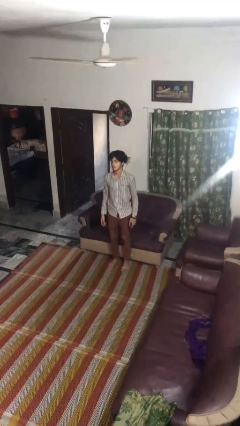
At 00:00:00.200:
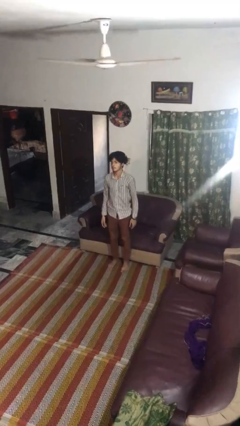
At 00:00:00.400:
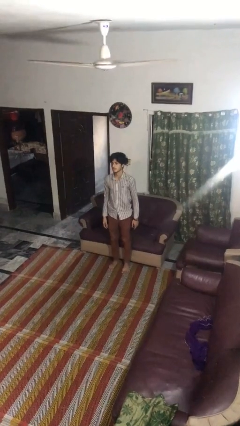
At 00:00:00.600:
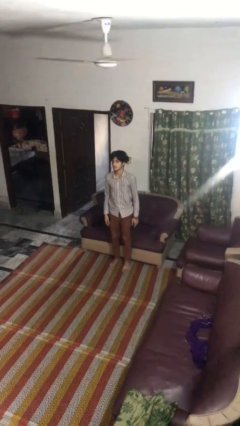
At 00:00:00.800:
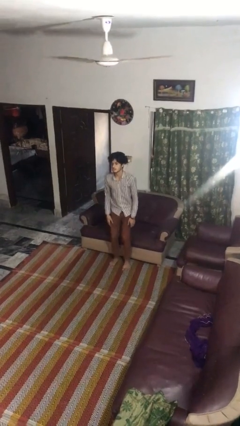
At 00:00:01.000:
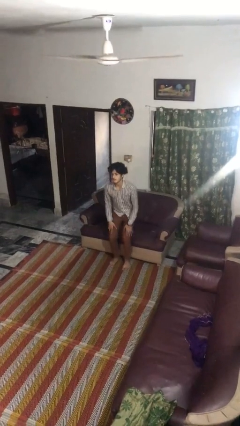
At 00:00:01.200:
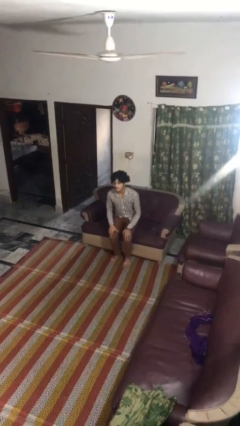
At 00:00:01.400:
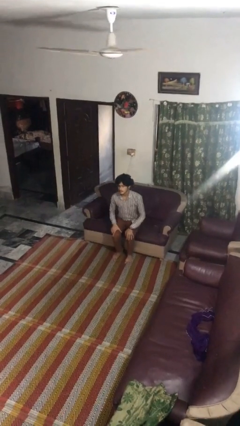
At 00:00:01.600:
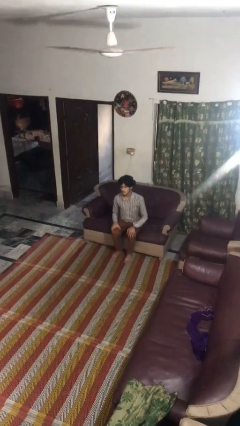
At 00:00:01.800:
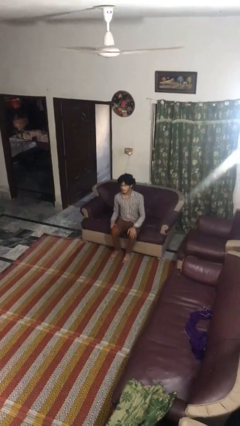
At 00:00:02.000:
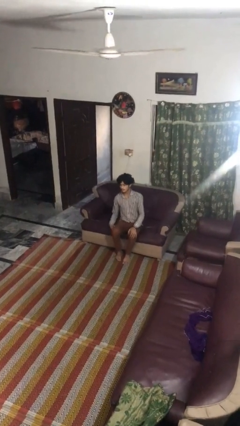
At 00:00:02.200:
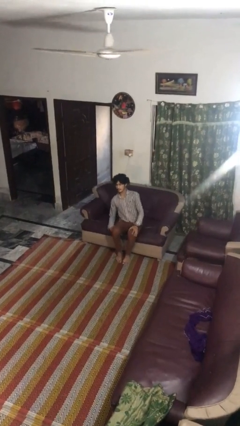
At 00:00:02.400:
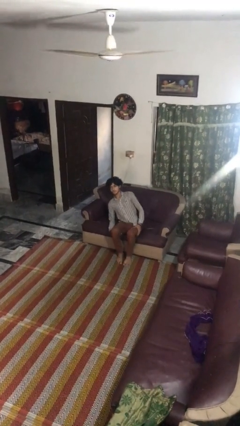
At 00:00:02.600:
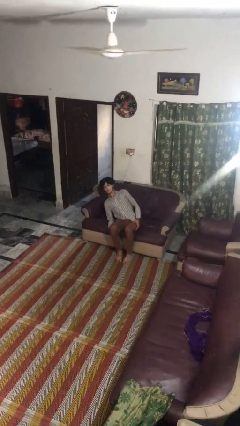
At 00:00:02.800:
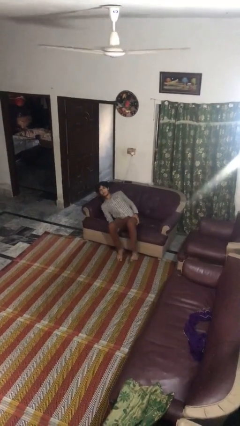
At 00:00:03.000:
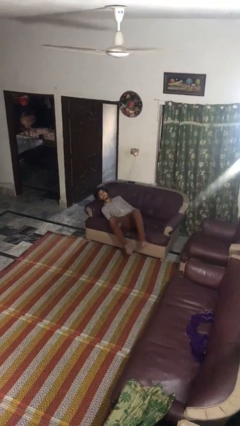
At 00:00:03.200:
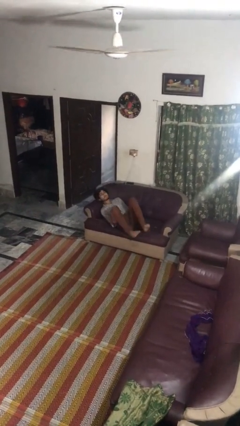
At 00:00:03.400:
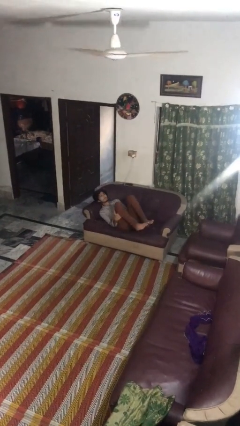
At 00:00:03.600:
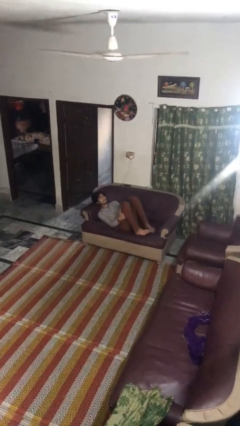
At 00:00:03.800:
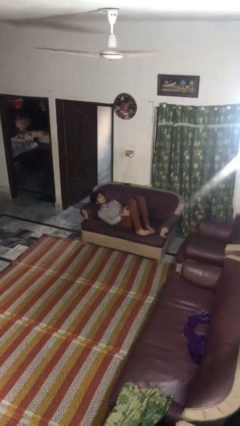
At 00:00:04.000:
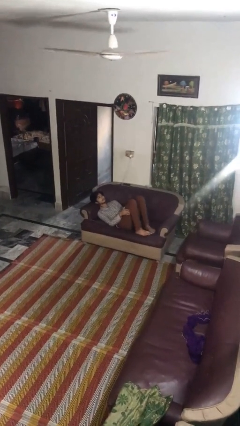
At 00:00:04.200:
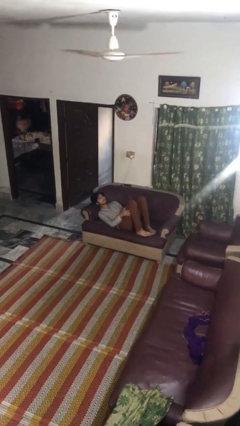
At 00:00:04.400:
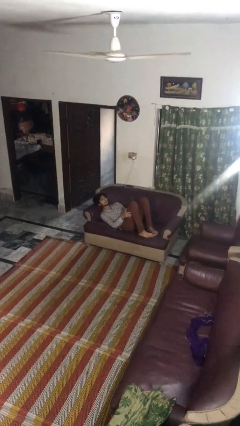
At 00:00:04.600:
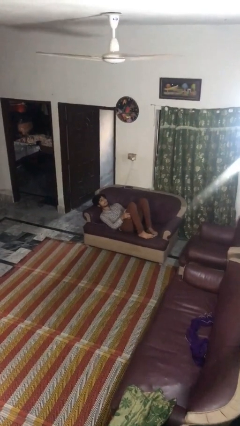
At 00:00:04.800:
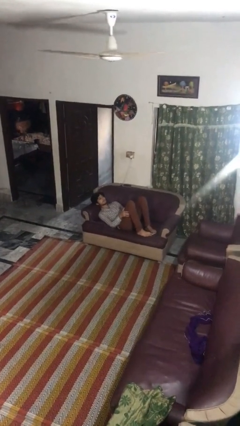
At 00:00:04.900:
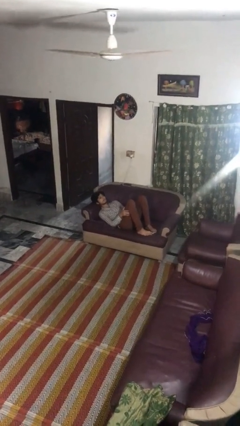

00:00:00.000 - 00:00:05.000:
person lies down on couch

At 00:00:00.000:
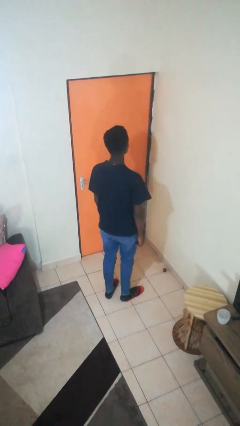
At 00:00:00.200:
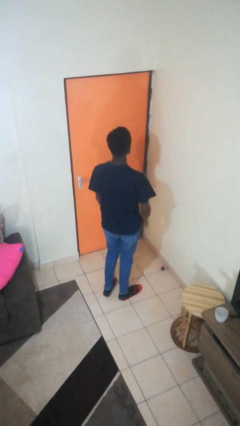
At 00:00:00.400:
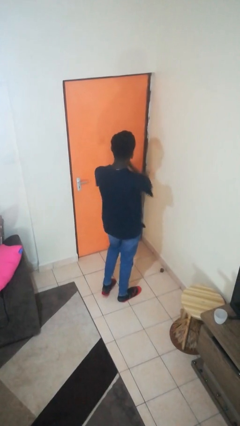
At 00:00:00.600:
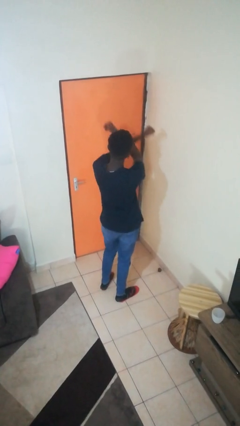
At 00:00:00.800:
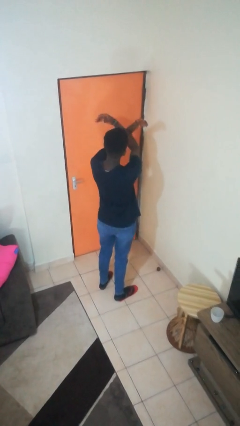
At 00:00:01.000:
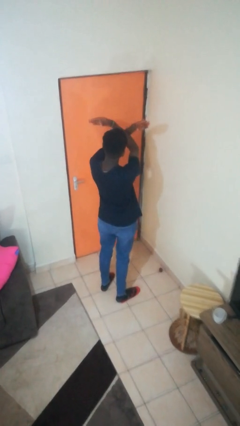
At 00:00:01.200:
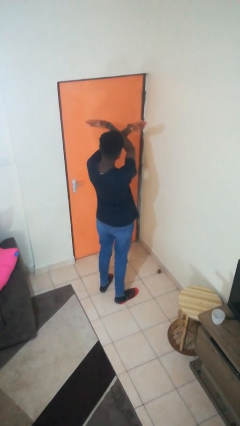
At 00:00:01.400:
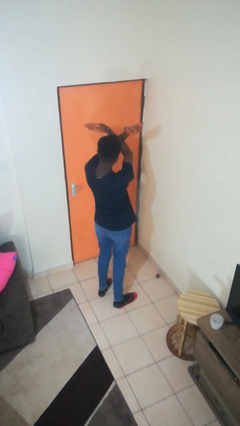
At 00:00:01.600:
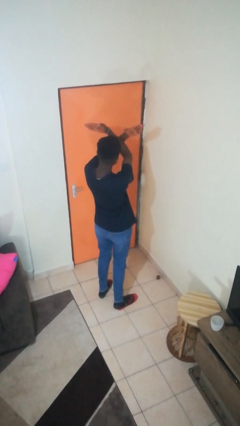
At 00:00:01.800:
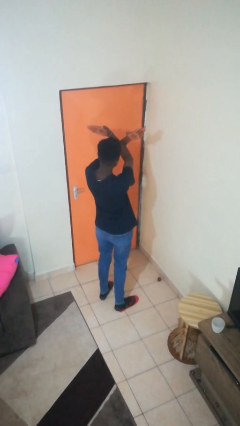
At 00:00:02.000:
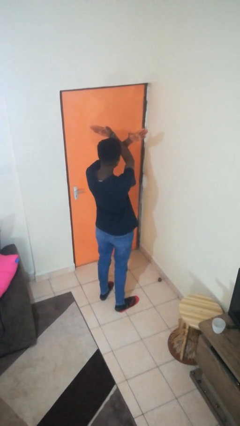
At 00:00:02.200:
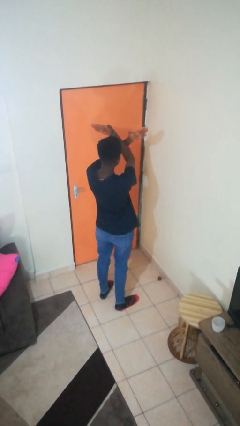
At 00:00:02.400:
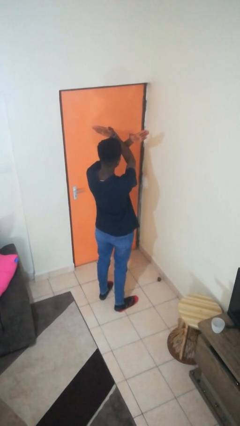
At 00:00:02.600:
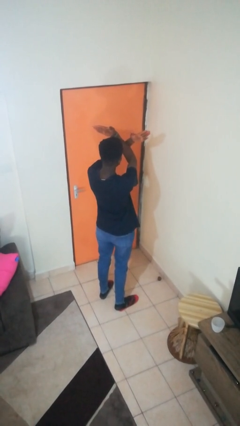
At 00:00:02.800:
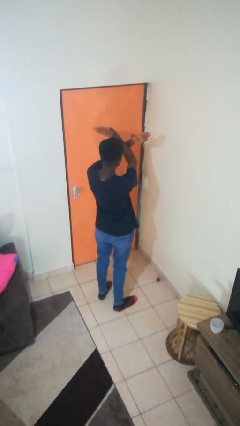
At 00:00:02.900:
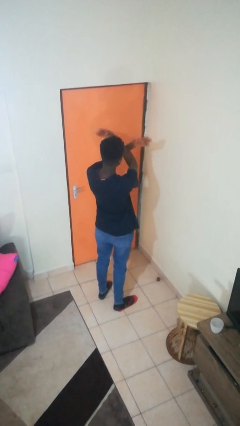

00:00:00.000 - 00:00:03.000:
person gestures arms x

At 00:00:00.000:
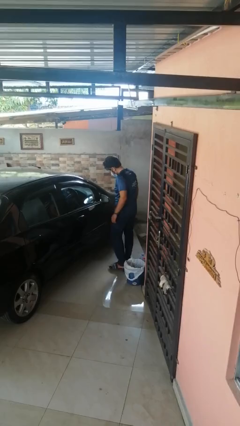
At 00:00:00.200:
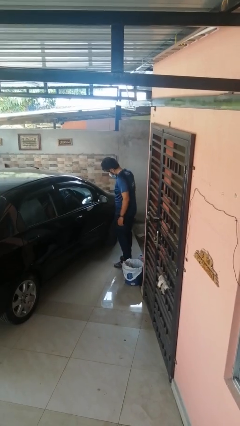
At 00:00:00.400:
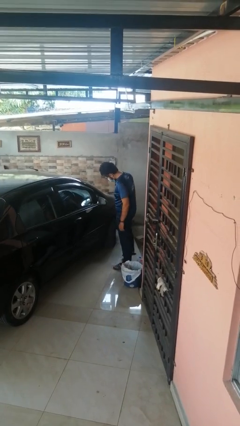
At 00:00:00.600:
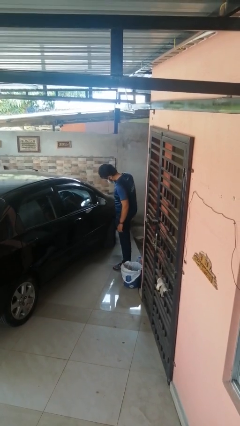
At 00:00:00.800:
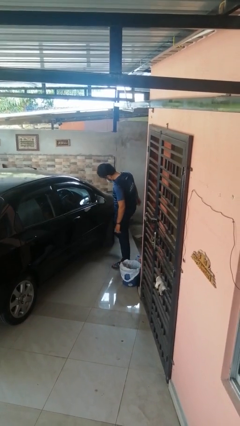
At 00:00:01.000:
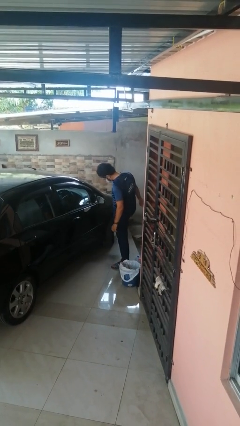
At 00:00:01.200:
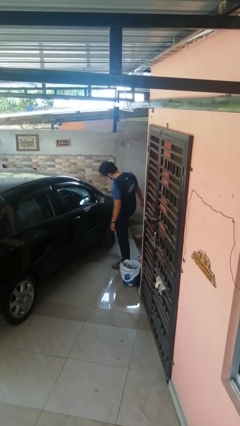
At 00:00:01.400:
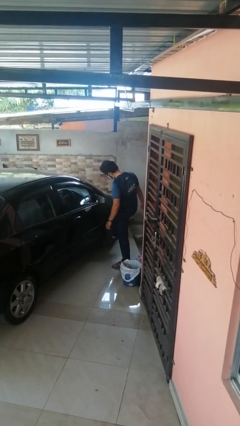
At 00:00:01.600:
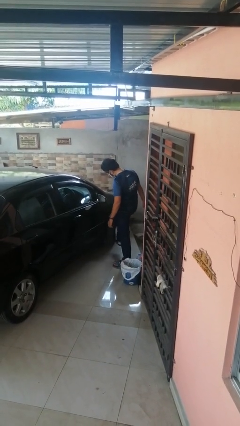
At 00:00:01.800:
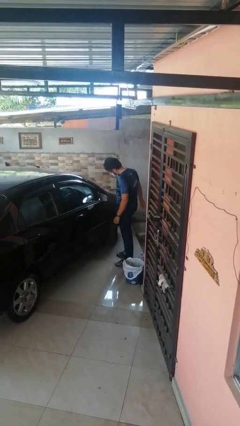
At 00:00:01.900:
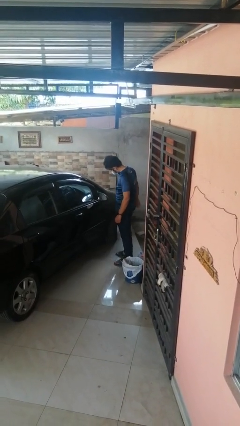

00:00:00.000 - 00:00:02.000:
person kicks car tires

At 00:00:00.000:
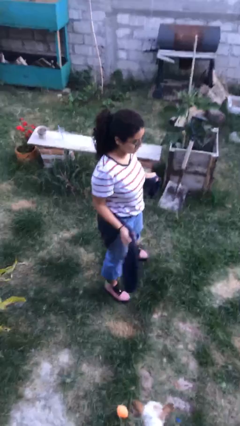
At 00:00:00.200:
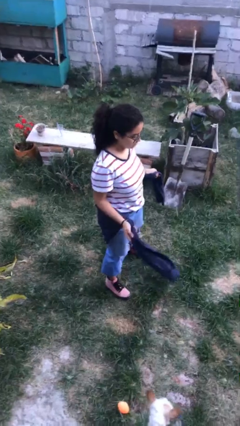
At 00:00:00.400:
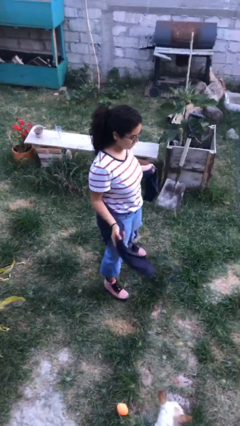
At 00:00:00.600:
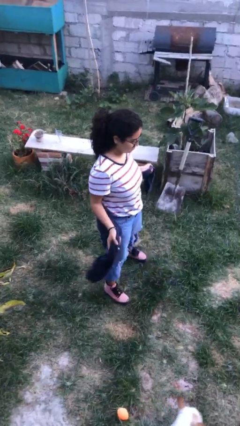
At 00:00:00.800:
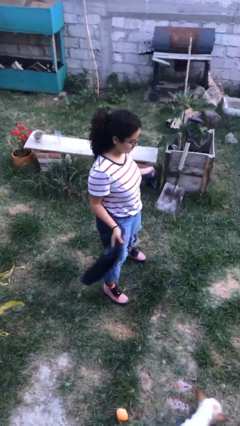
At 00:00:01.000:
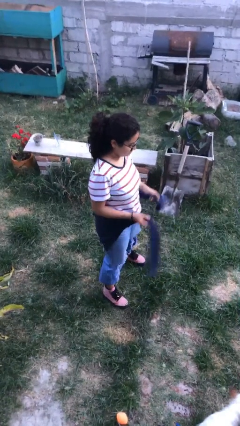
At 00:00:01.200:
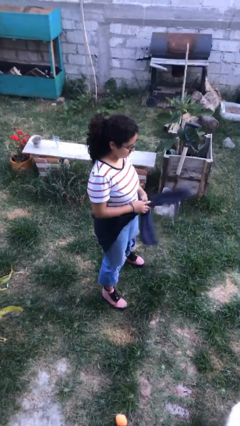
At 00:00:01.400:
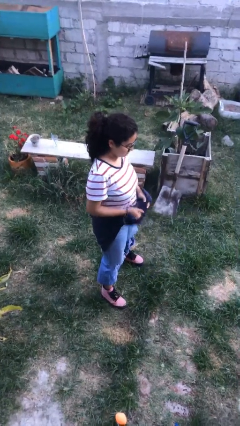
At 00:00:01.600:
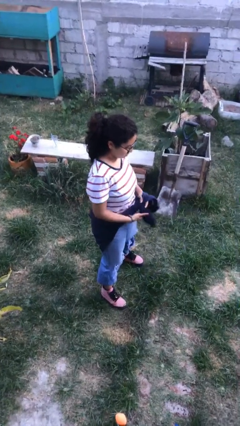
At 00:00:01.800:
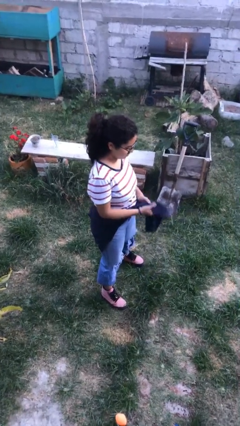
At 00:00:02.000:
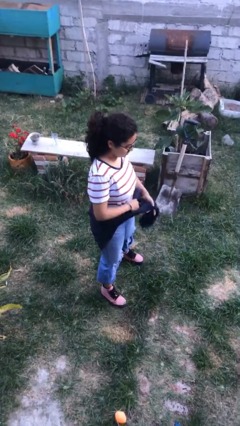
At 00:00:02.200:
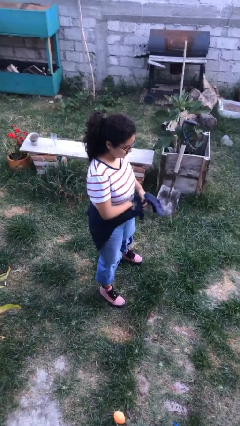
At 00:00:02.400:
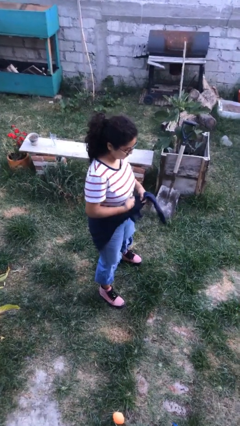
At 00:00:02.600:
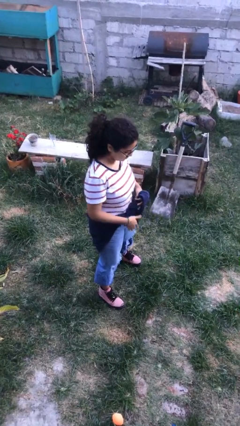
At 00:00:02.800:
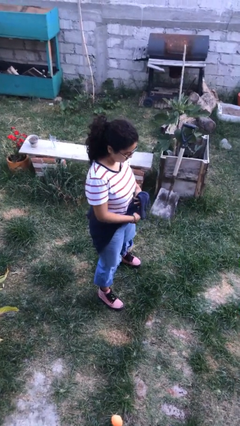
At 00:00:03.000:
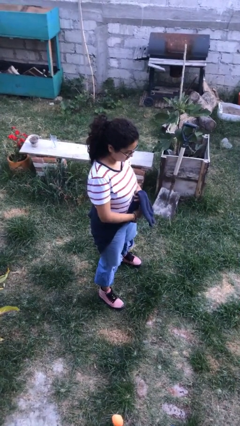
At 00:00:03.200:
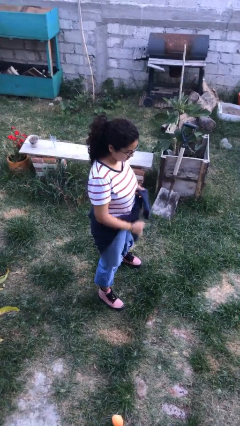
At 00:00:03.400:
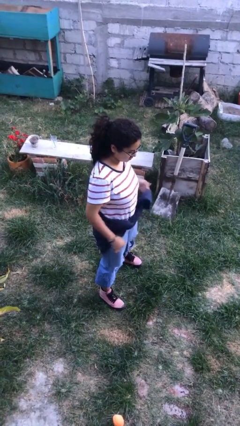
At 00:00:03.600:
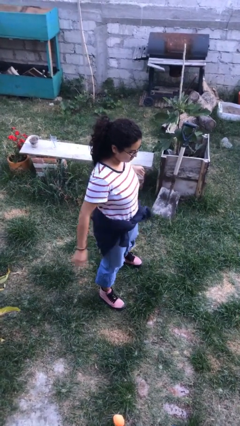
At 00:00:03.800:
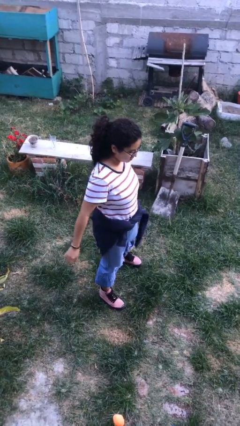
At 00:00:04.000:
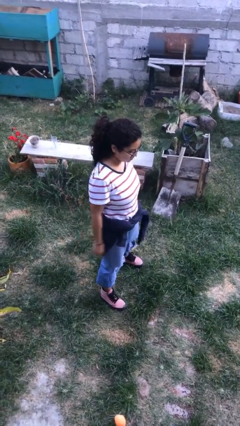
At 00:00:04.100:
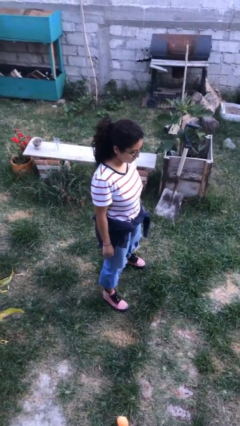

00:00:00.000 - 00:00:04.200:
person ties jacket around waist

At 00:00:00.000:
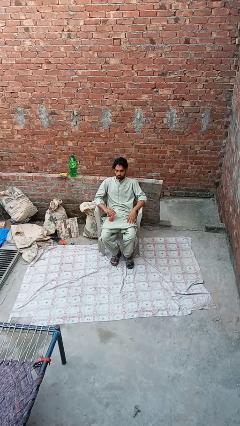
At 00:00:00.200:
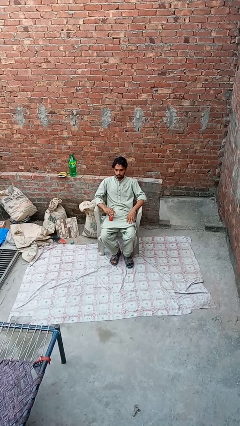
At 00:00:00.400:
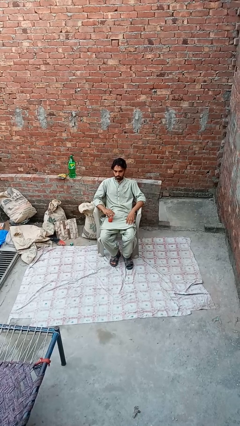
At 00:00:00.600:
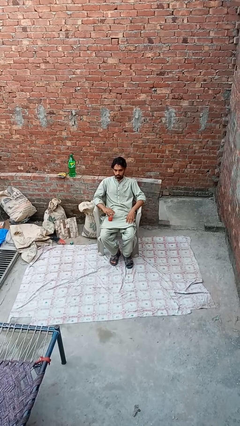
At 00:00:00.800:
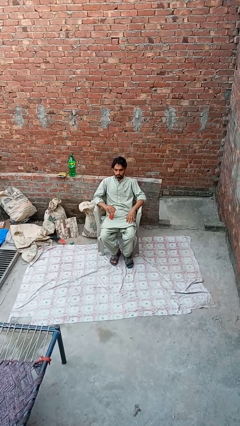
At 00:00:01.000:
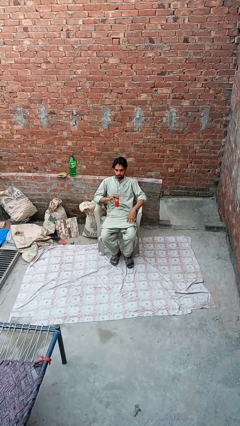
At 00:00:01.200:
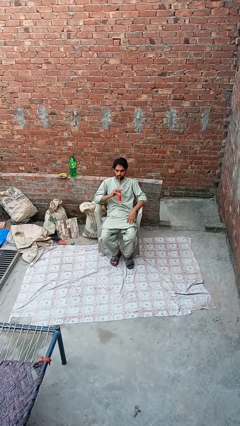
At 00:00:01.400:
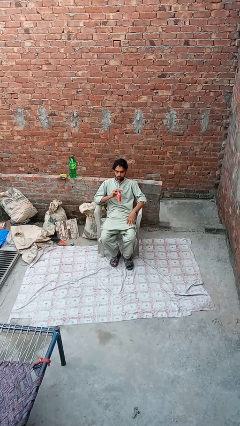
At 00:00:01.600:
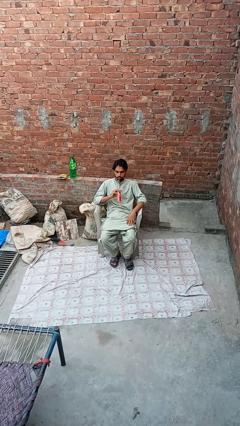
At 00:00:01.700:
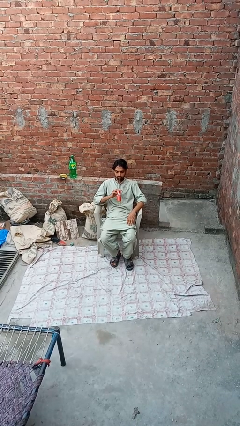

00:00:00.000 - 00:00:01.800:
person drinks from straw

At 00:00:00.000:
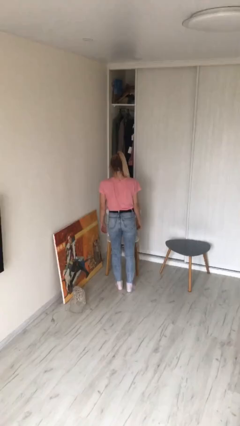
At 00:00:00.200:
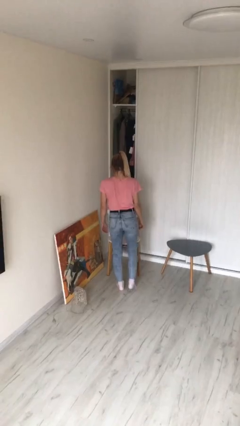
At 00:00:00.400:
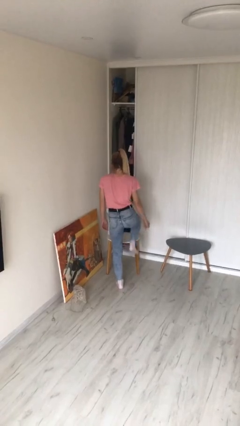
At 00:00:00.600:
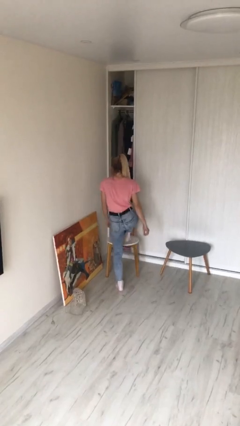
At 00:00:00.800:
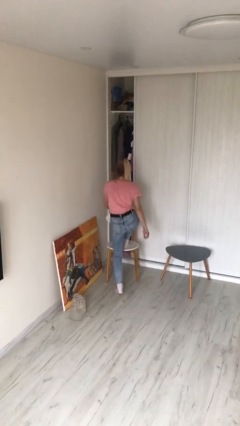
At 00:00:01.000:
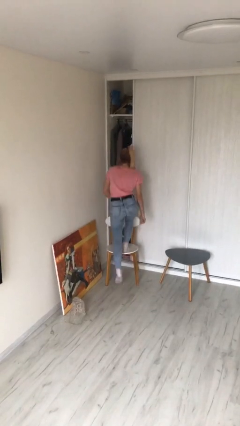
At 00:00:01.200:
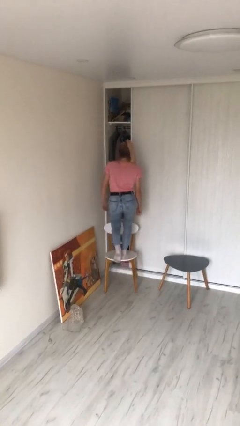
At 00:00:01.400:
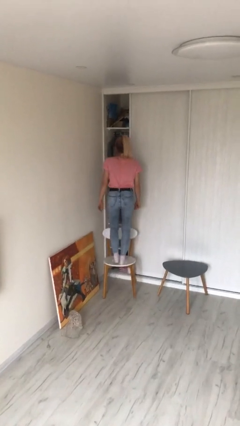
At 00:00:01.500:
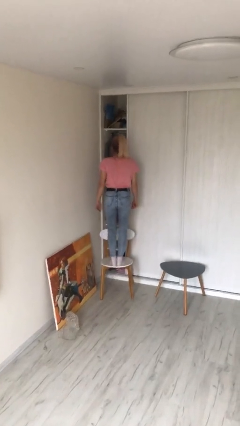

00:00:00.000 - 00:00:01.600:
person climbs on chair
